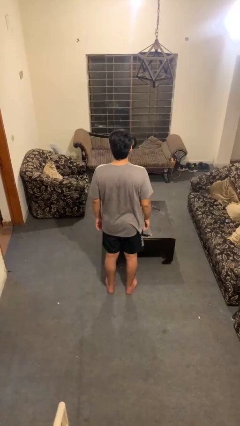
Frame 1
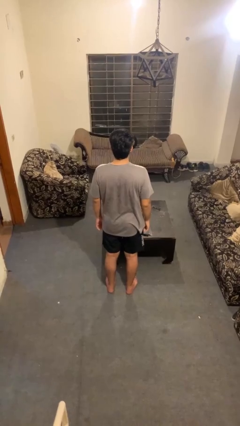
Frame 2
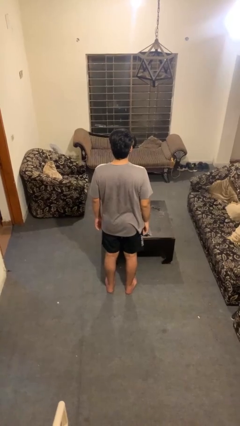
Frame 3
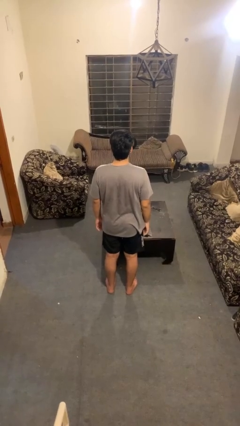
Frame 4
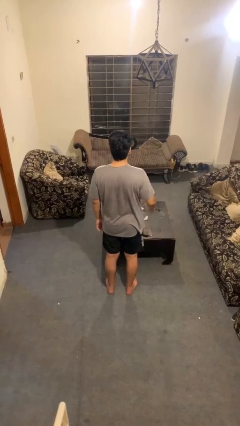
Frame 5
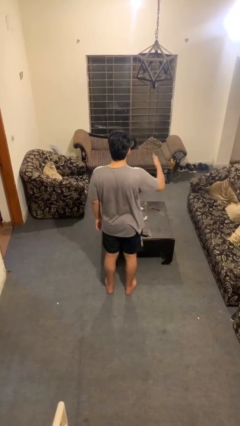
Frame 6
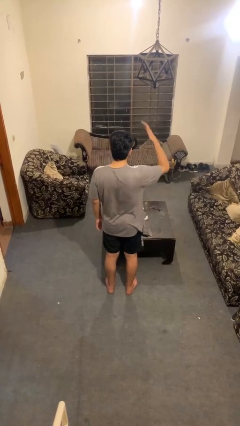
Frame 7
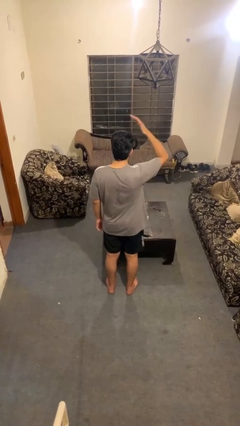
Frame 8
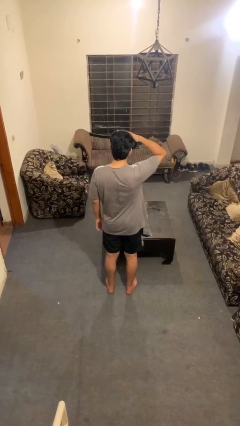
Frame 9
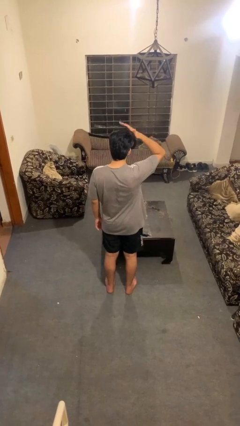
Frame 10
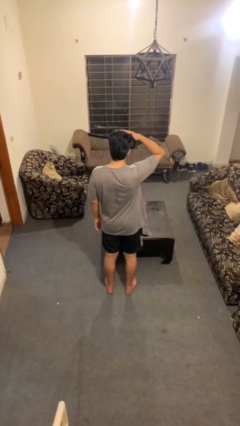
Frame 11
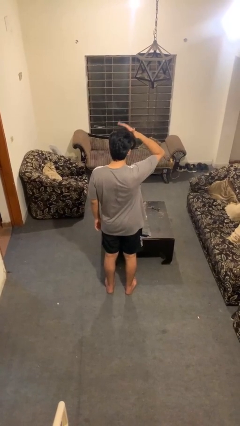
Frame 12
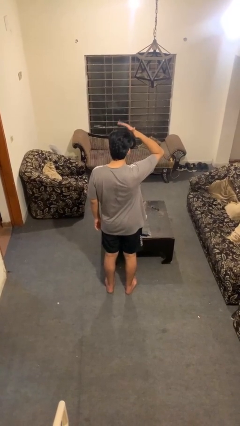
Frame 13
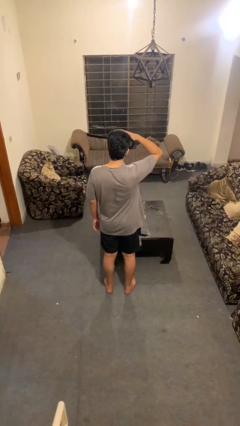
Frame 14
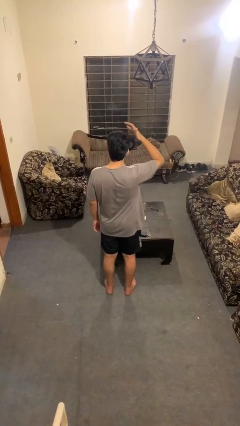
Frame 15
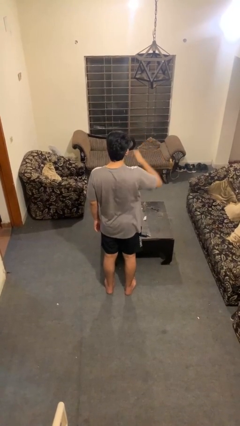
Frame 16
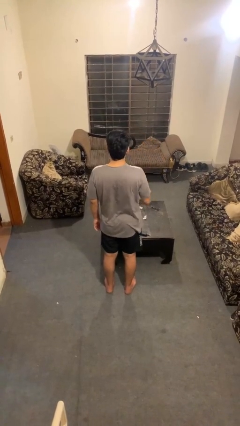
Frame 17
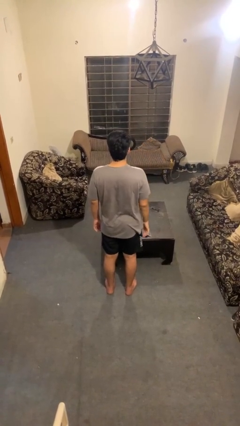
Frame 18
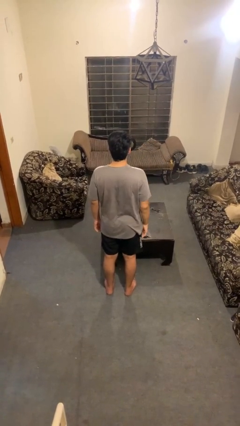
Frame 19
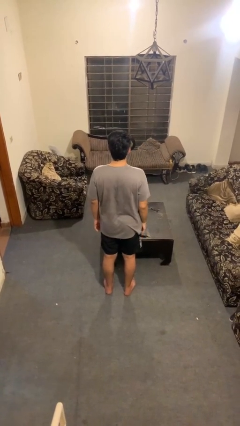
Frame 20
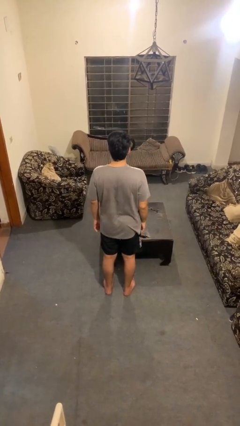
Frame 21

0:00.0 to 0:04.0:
person pats head

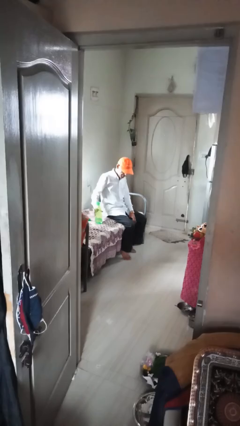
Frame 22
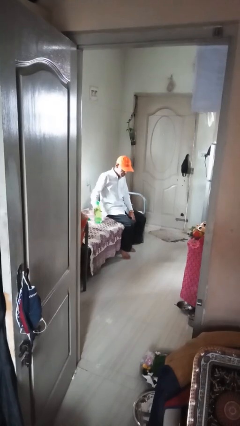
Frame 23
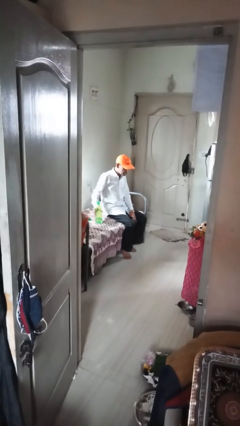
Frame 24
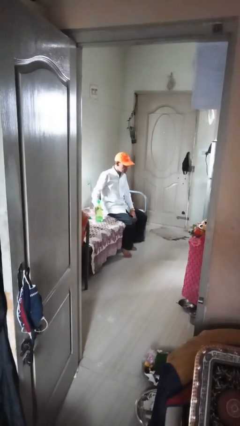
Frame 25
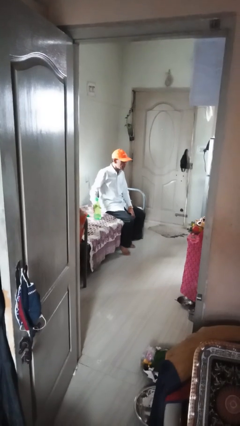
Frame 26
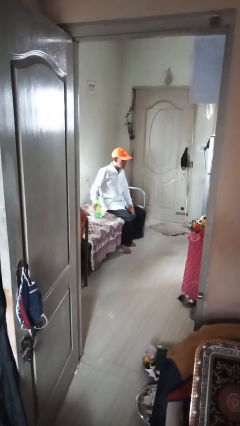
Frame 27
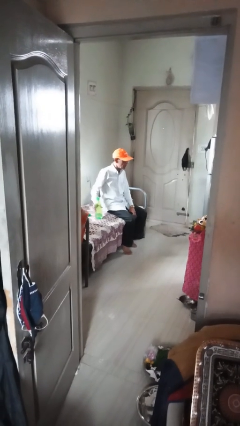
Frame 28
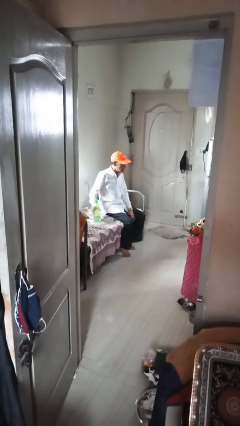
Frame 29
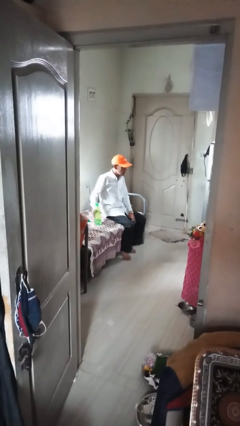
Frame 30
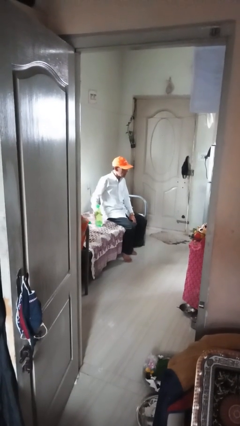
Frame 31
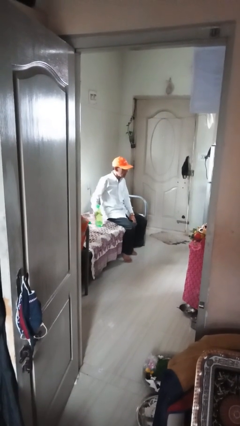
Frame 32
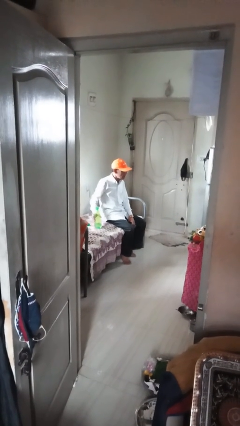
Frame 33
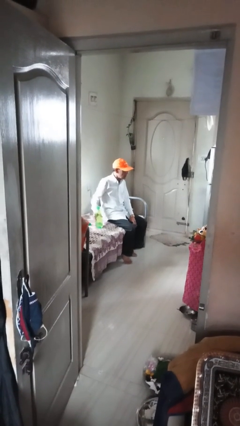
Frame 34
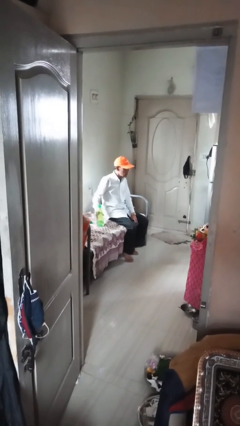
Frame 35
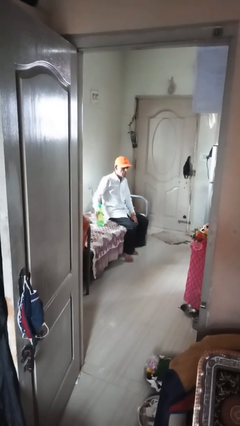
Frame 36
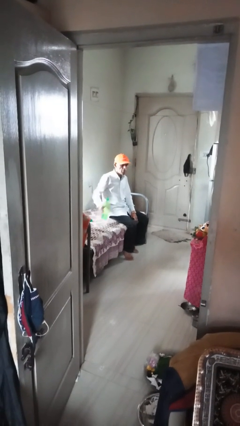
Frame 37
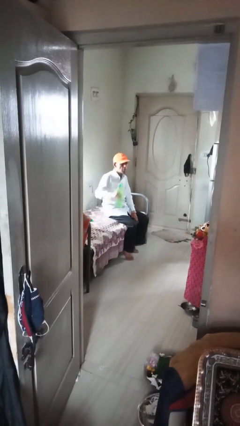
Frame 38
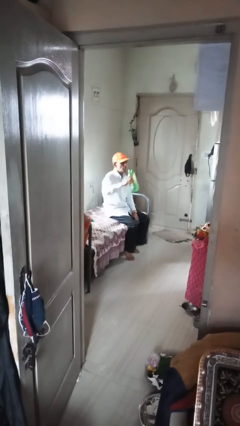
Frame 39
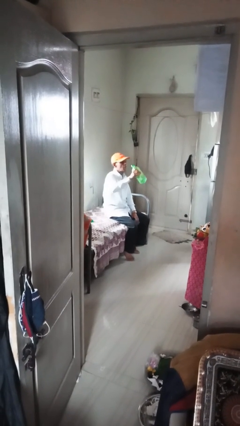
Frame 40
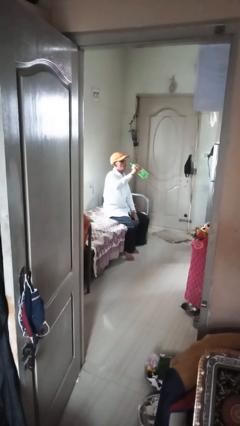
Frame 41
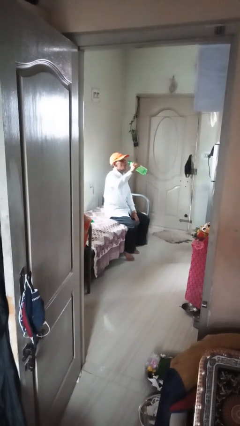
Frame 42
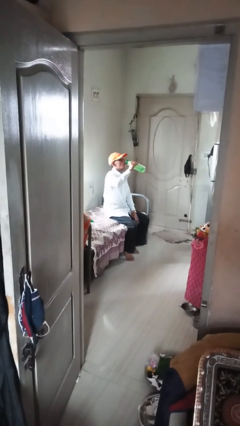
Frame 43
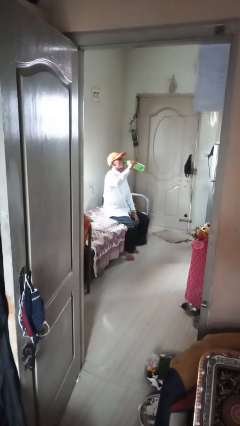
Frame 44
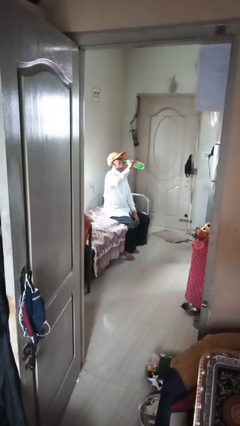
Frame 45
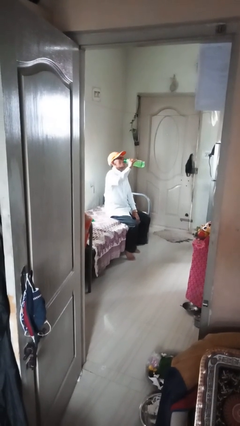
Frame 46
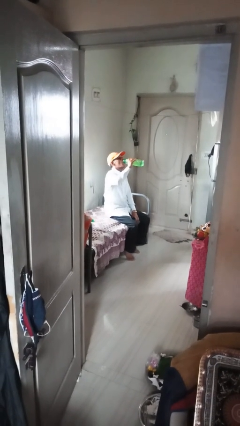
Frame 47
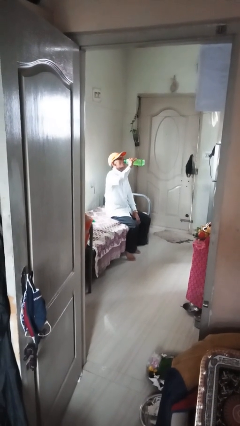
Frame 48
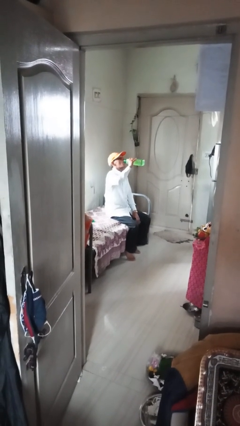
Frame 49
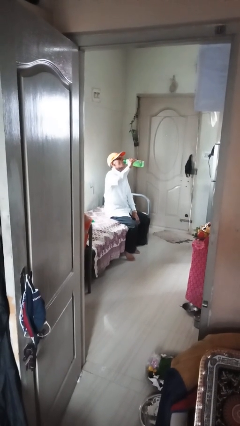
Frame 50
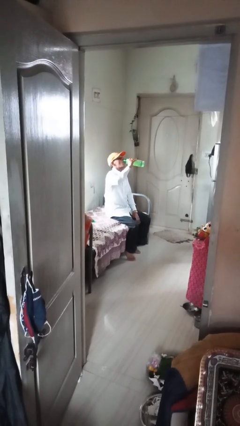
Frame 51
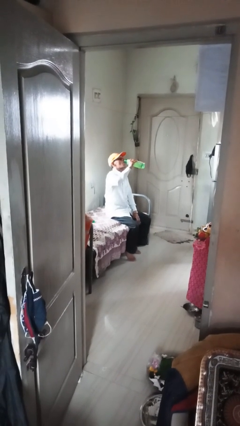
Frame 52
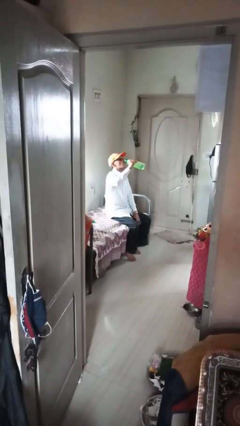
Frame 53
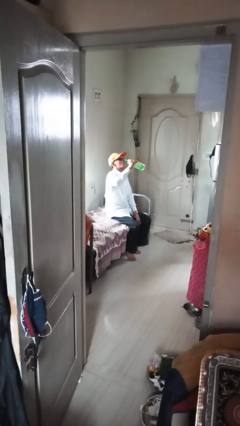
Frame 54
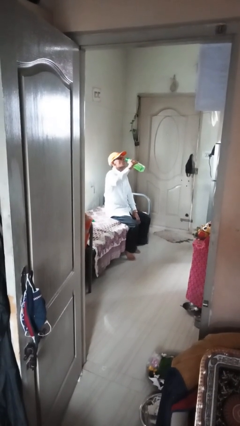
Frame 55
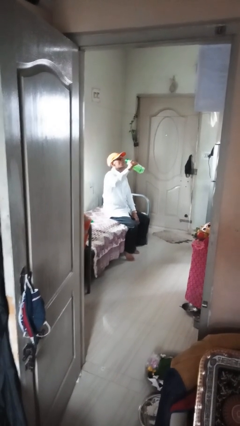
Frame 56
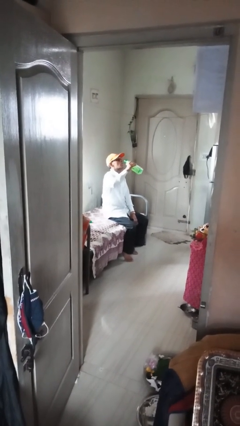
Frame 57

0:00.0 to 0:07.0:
person drinks from bottle

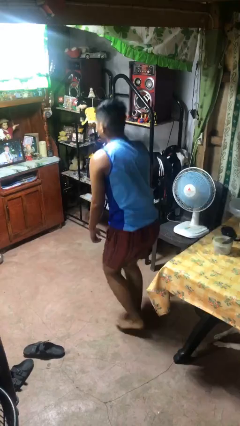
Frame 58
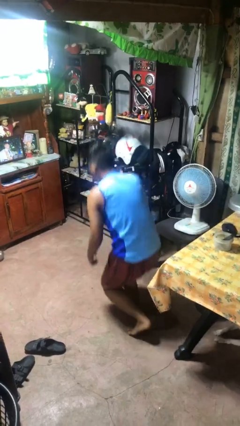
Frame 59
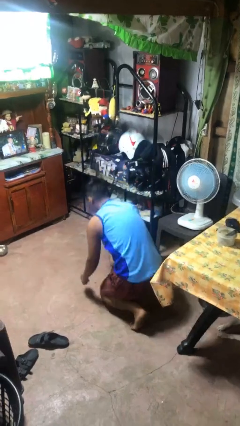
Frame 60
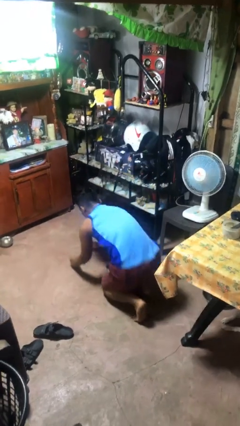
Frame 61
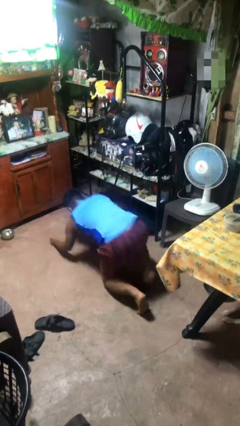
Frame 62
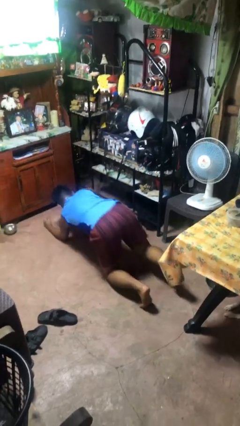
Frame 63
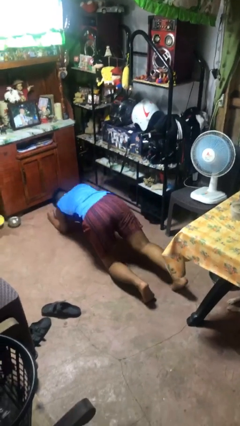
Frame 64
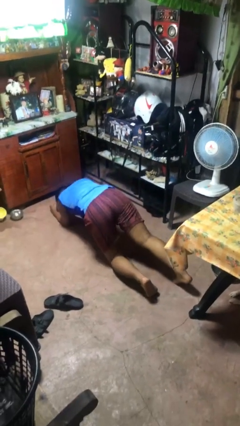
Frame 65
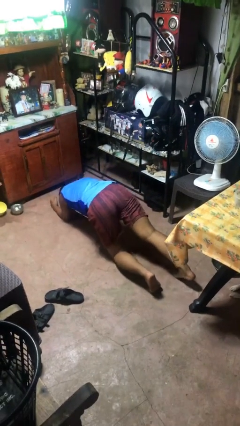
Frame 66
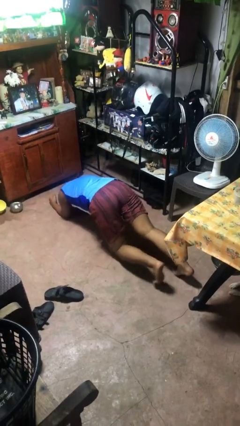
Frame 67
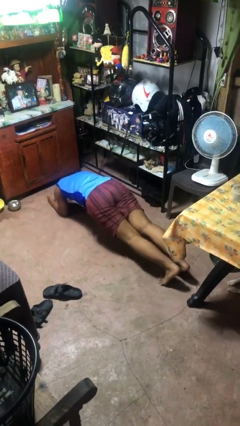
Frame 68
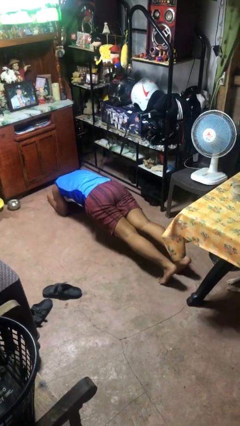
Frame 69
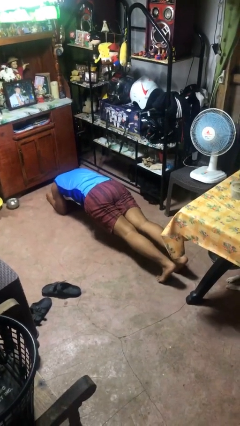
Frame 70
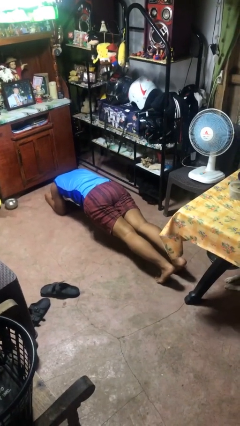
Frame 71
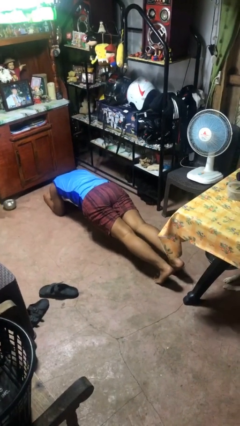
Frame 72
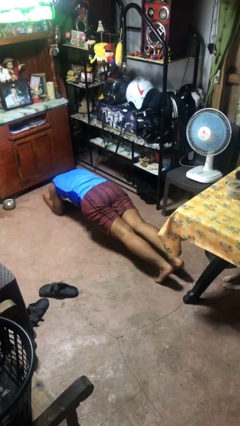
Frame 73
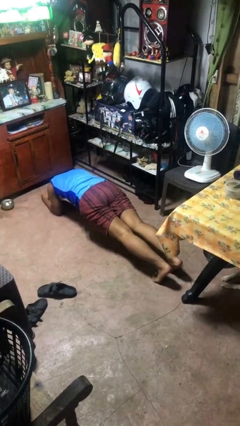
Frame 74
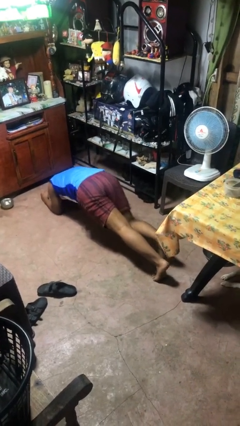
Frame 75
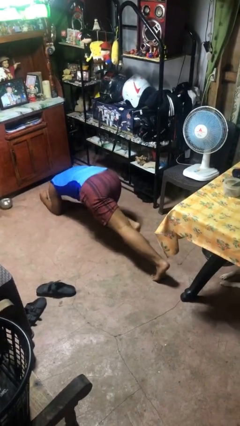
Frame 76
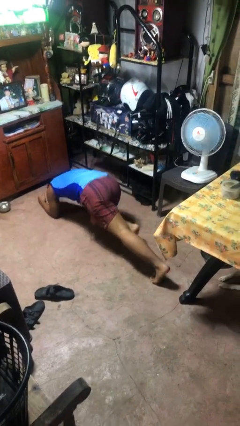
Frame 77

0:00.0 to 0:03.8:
person exercises with plank

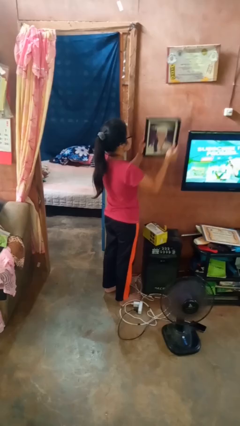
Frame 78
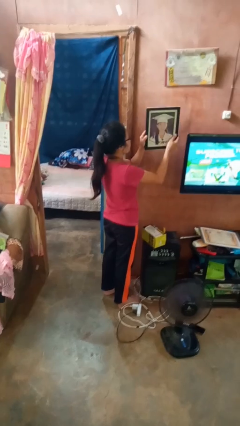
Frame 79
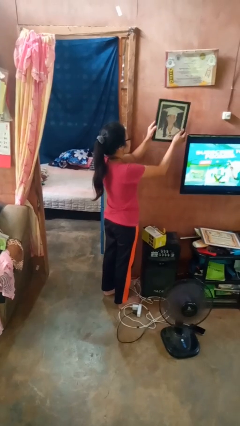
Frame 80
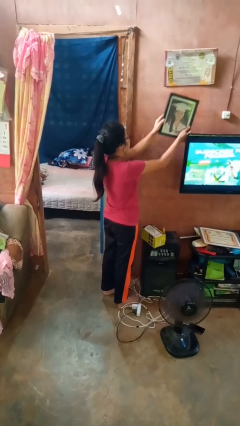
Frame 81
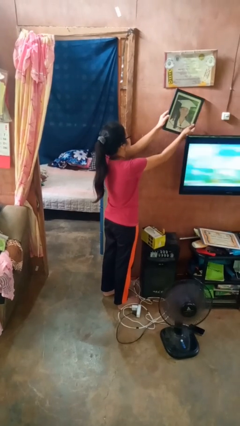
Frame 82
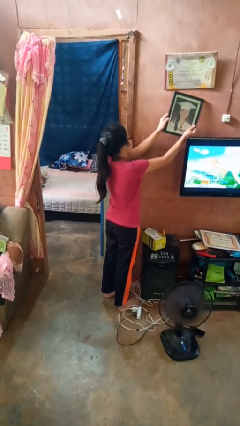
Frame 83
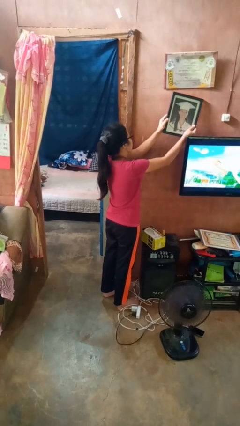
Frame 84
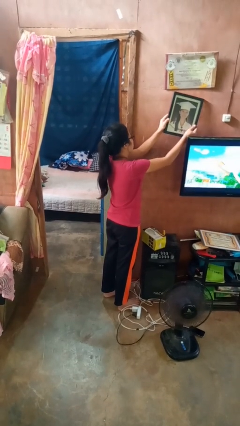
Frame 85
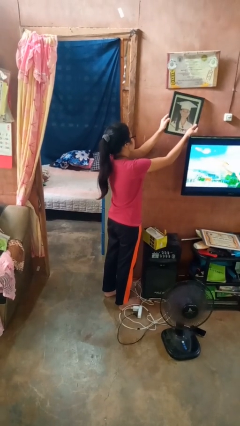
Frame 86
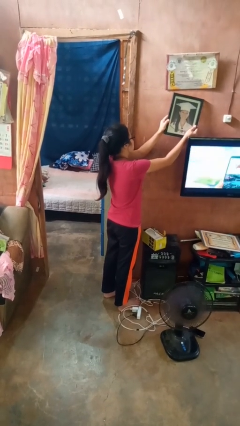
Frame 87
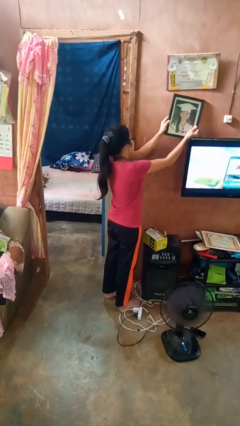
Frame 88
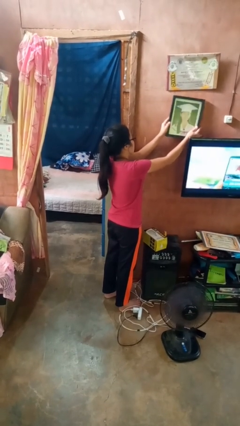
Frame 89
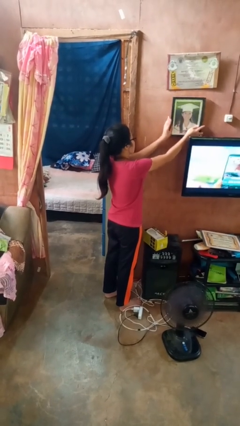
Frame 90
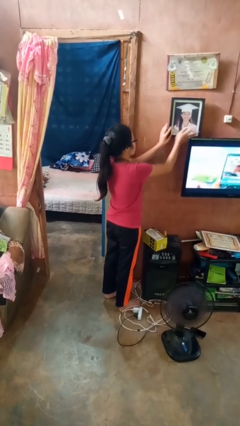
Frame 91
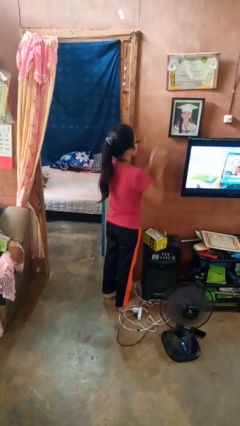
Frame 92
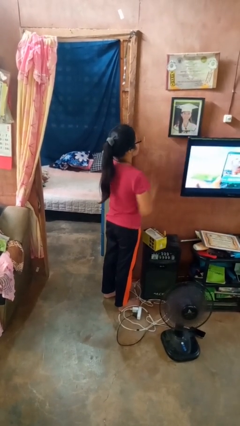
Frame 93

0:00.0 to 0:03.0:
person puts up picture frame
